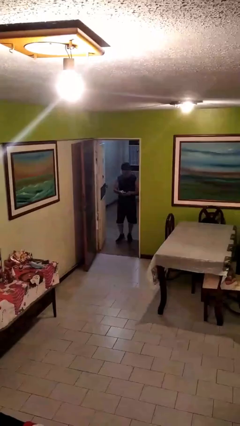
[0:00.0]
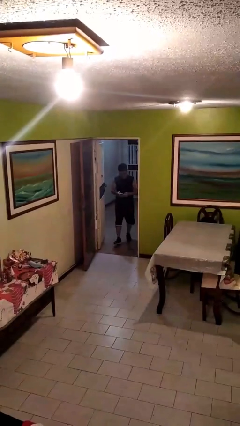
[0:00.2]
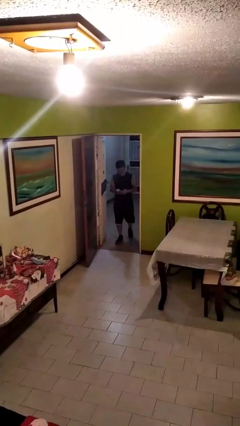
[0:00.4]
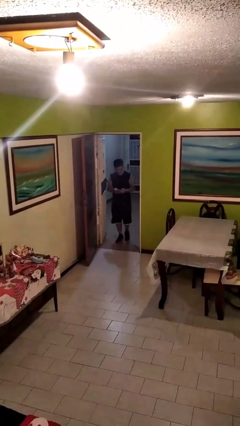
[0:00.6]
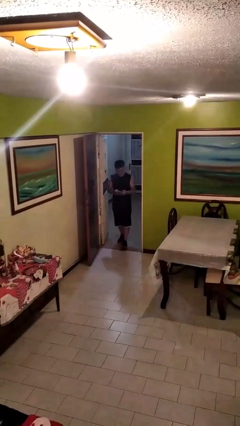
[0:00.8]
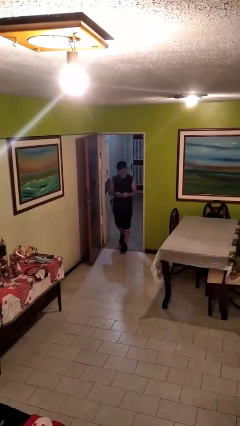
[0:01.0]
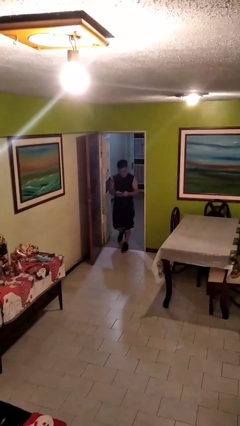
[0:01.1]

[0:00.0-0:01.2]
person enters scene through structure

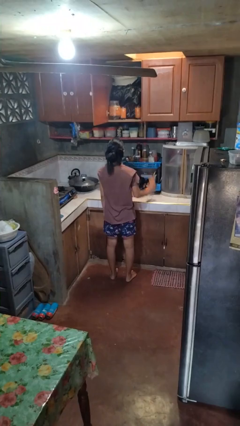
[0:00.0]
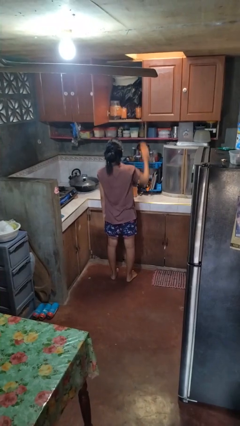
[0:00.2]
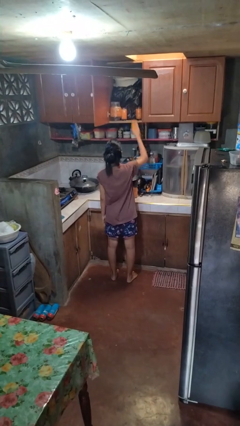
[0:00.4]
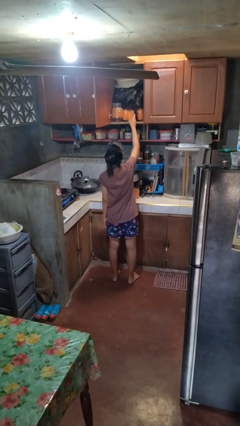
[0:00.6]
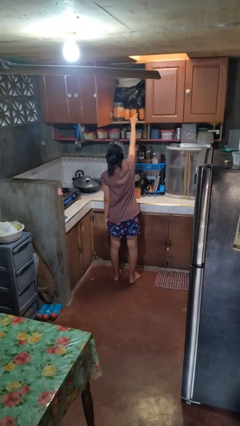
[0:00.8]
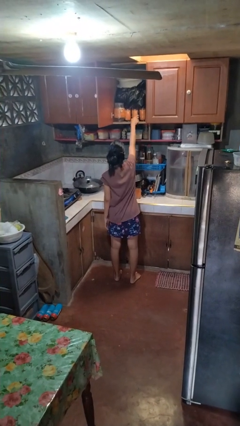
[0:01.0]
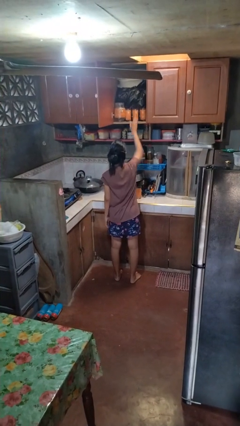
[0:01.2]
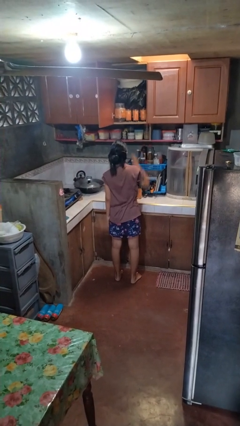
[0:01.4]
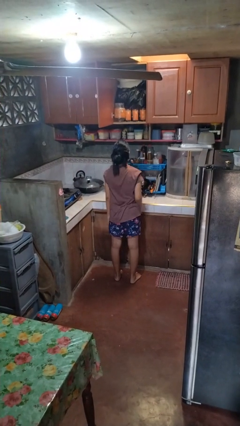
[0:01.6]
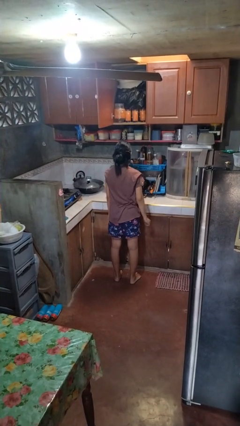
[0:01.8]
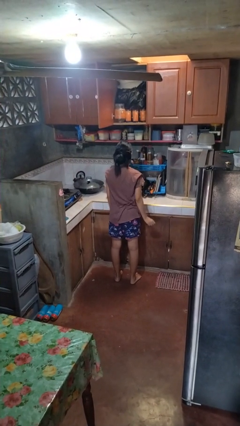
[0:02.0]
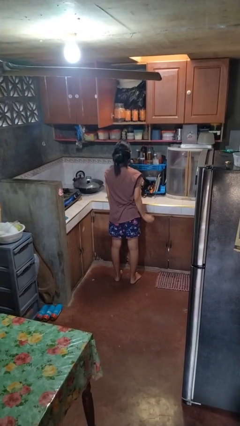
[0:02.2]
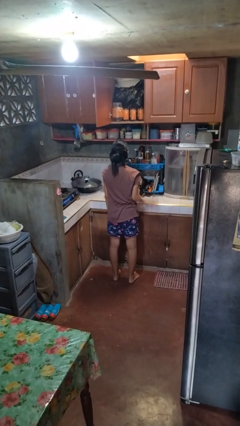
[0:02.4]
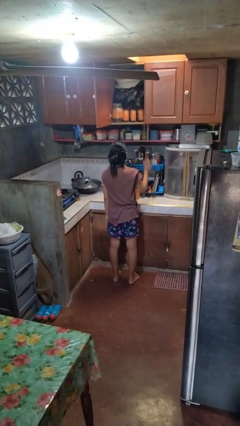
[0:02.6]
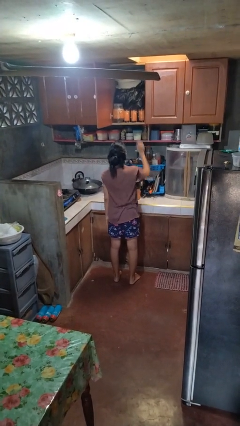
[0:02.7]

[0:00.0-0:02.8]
person puts object in cabinet

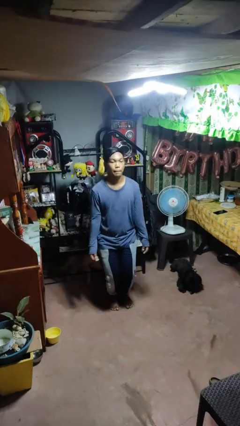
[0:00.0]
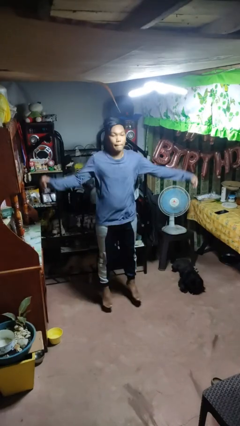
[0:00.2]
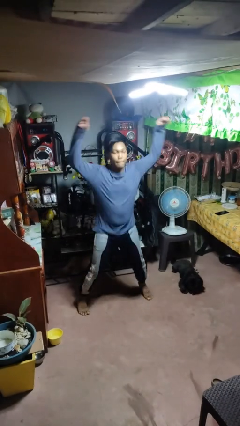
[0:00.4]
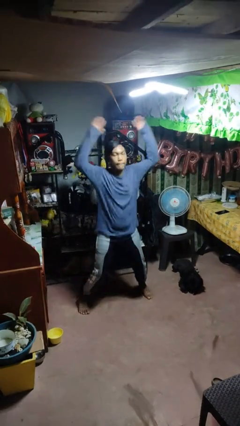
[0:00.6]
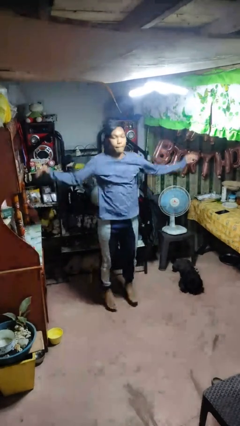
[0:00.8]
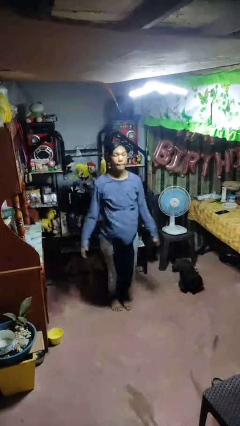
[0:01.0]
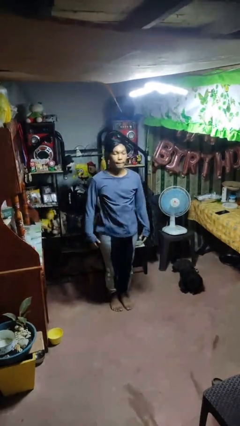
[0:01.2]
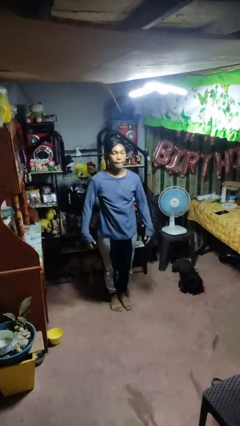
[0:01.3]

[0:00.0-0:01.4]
person exercises with jumping jacks

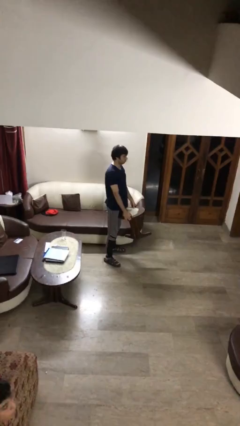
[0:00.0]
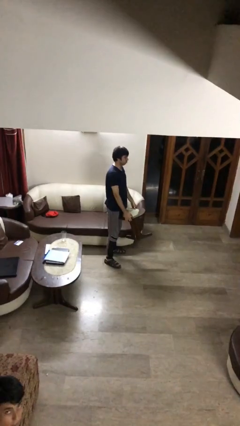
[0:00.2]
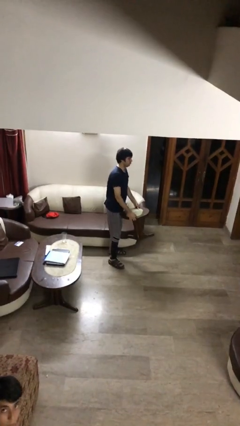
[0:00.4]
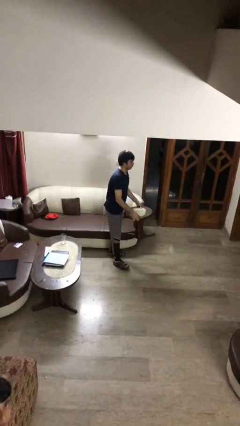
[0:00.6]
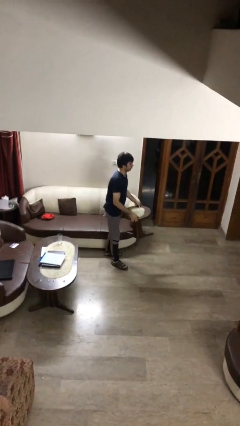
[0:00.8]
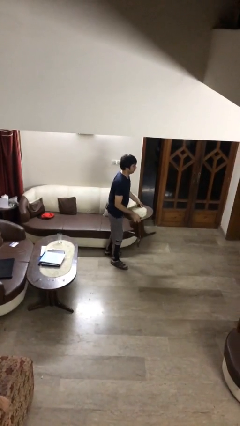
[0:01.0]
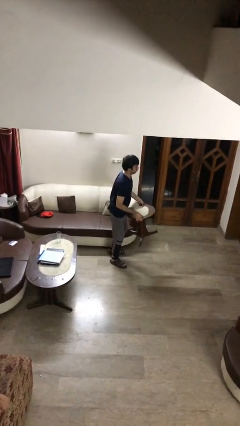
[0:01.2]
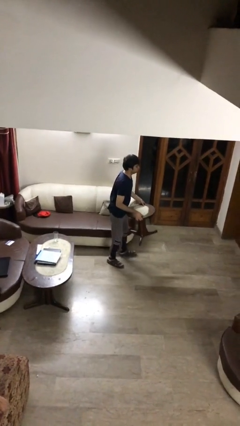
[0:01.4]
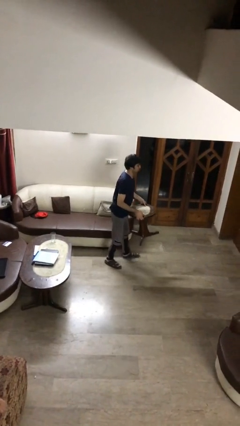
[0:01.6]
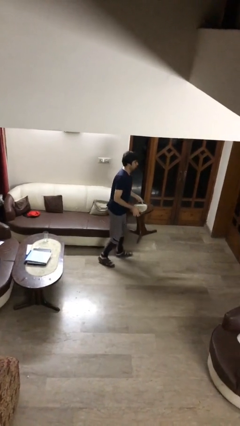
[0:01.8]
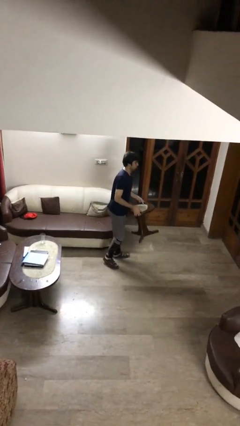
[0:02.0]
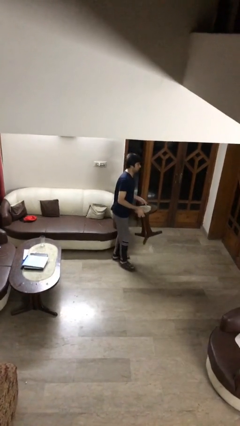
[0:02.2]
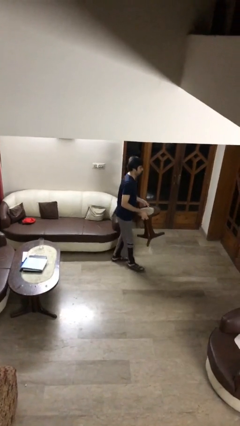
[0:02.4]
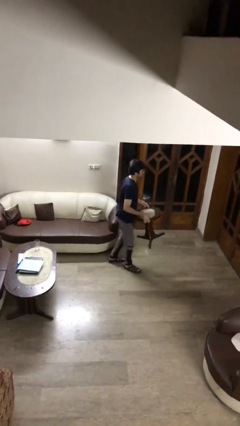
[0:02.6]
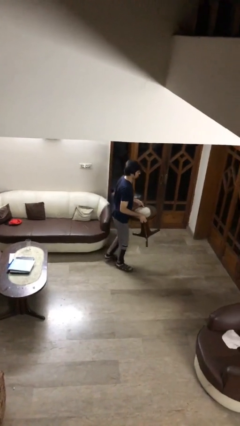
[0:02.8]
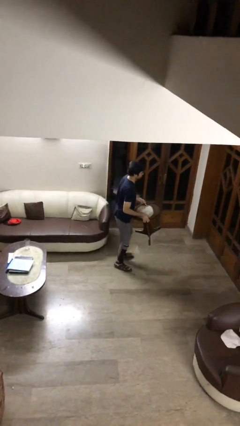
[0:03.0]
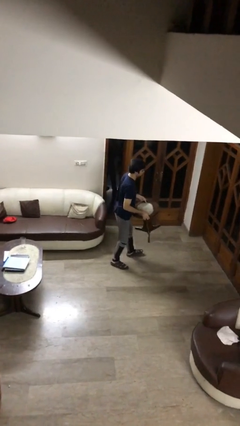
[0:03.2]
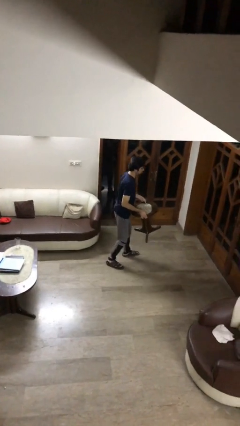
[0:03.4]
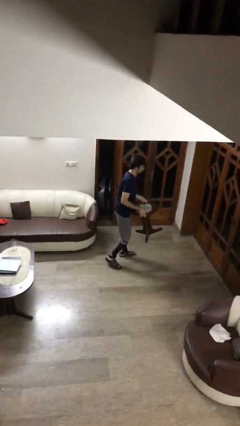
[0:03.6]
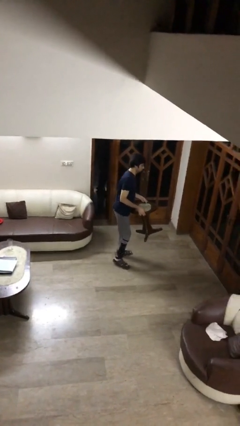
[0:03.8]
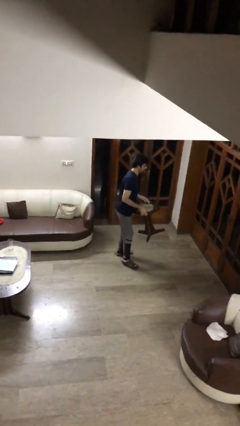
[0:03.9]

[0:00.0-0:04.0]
person carries heavy object

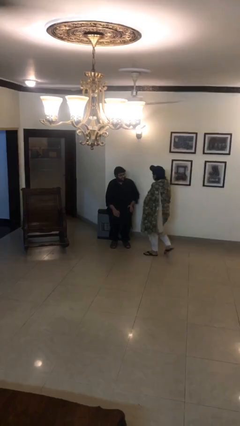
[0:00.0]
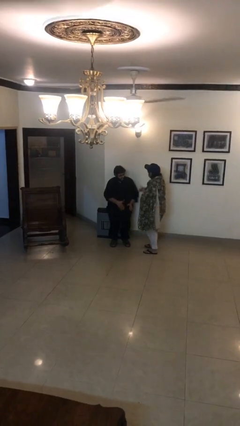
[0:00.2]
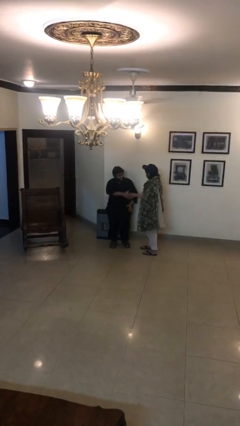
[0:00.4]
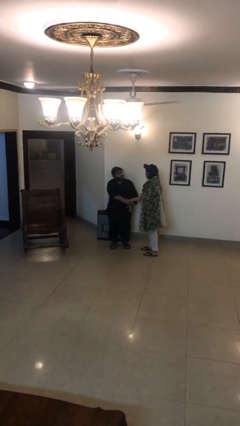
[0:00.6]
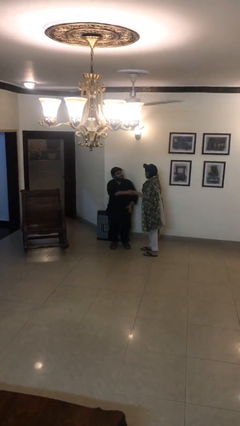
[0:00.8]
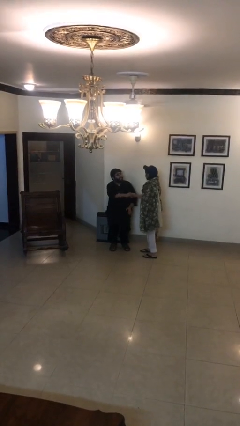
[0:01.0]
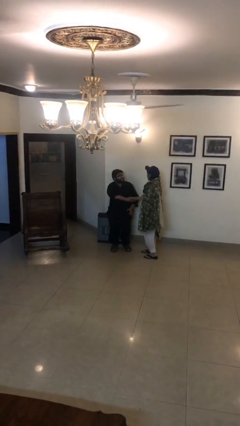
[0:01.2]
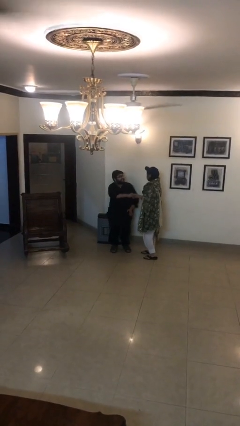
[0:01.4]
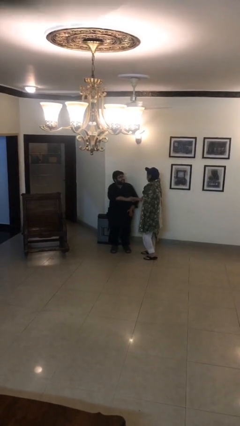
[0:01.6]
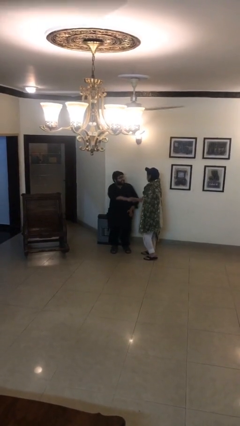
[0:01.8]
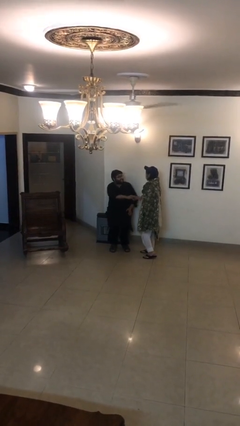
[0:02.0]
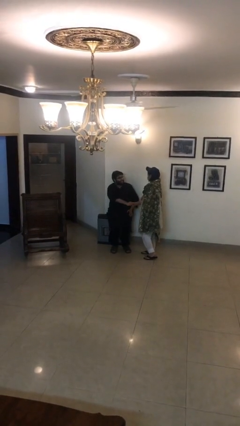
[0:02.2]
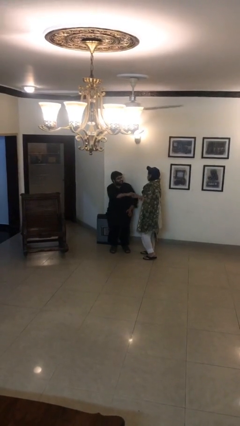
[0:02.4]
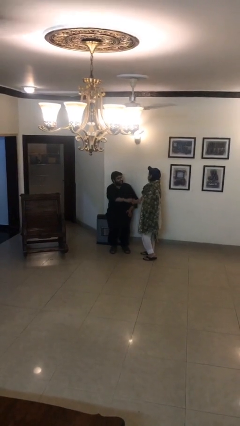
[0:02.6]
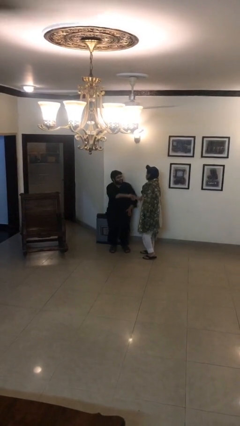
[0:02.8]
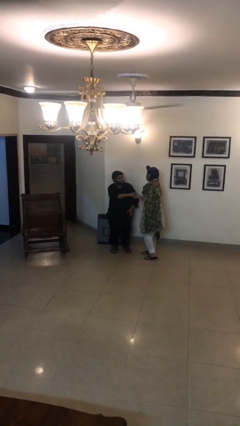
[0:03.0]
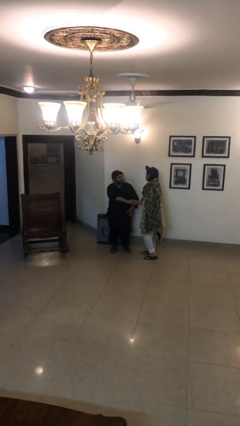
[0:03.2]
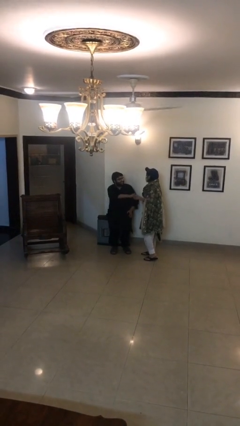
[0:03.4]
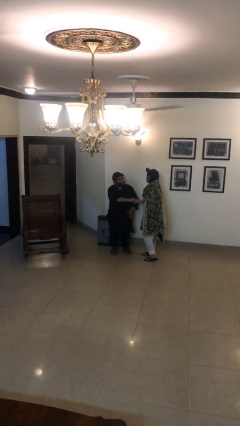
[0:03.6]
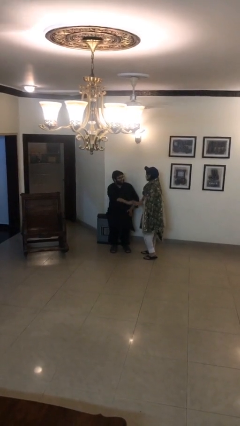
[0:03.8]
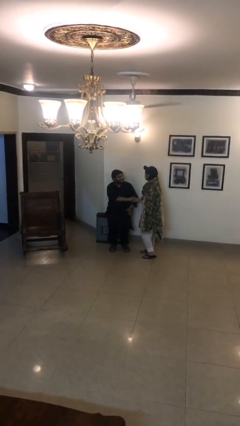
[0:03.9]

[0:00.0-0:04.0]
person shakes hand

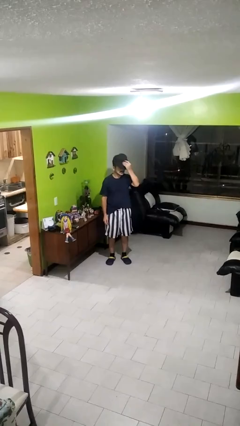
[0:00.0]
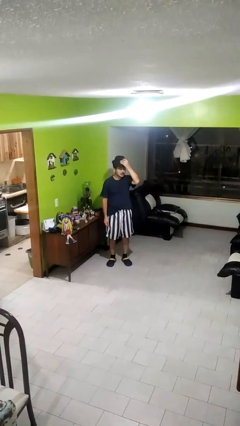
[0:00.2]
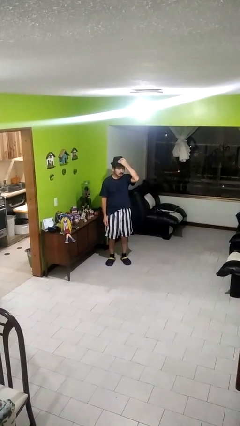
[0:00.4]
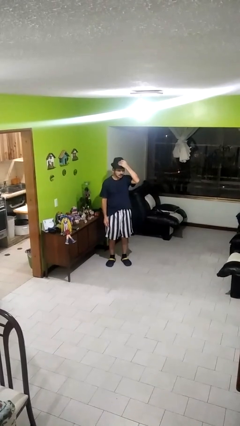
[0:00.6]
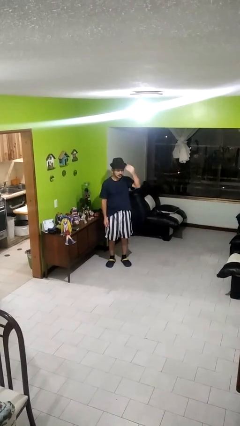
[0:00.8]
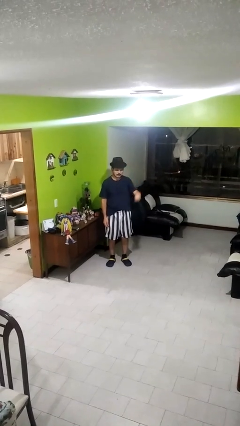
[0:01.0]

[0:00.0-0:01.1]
person puts on hat

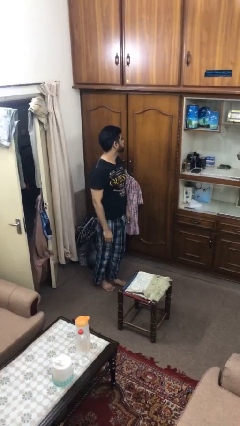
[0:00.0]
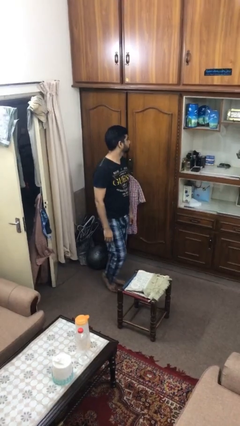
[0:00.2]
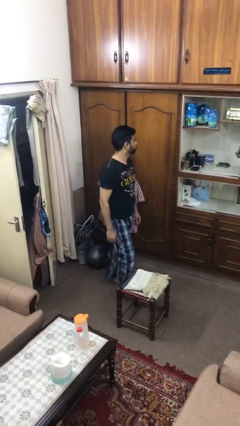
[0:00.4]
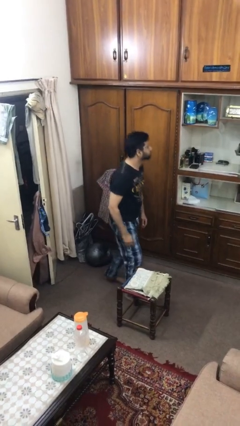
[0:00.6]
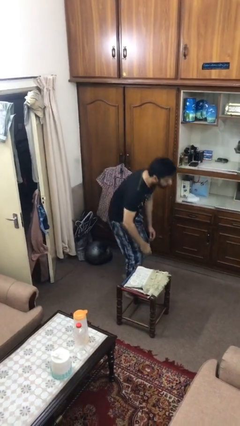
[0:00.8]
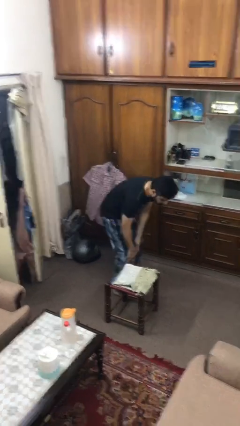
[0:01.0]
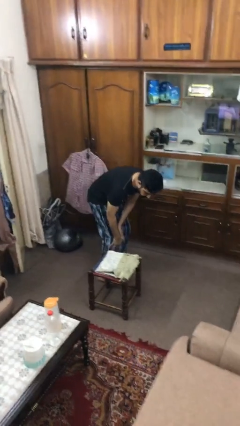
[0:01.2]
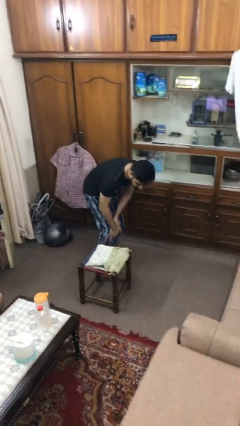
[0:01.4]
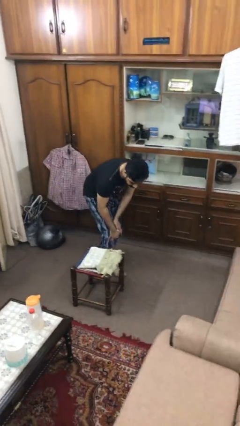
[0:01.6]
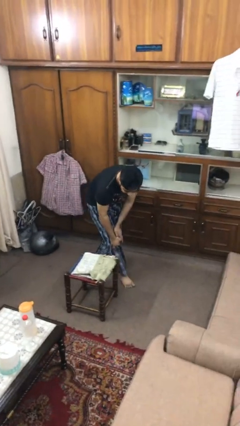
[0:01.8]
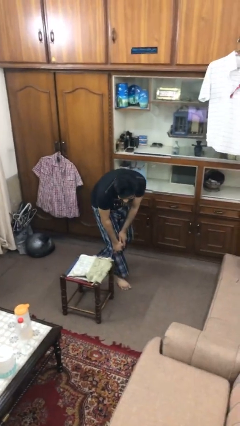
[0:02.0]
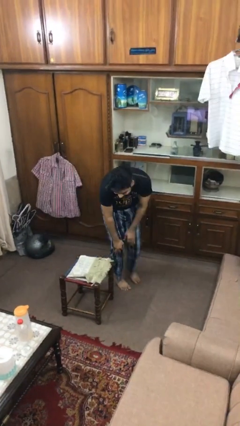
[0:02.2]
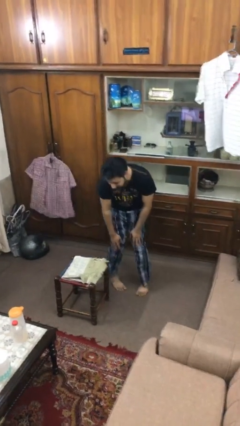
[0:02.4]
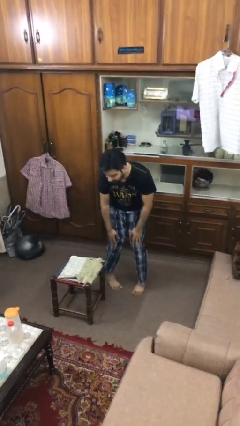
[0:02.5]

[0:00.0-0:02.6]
person bumps into table
